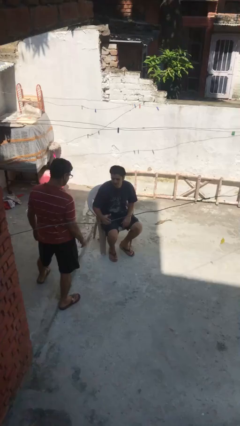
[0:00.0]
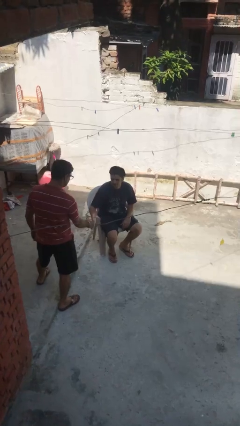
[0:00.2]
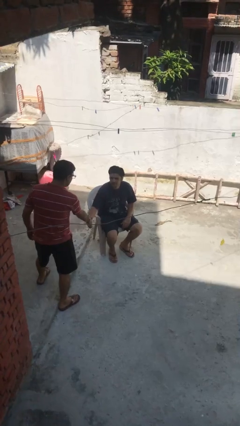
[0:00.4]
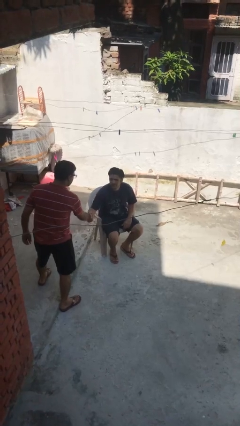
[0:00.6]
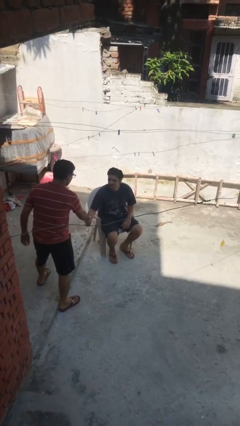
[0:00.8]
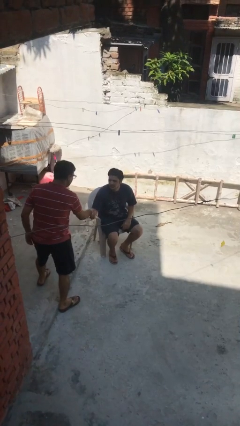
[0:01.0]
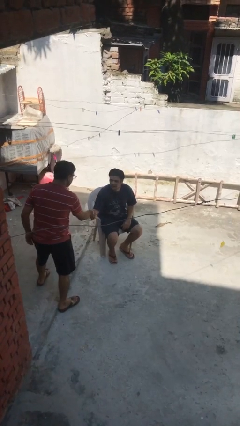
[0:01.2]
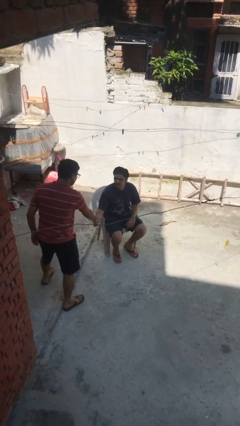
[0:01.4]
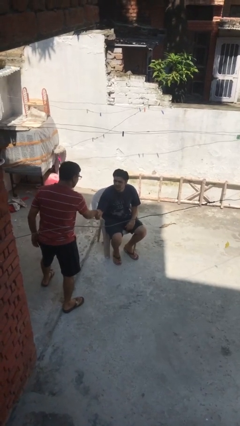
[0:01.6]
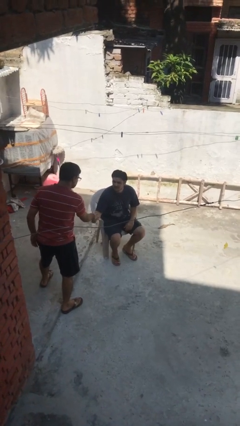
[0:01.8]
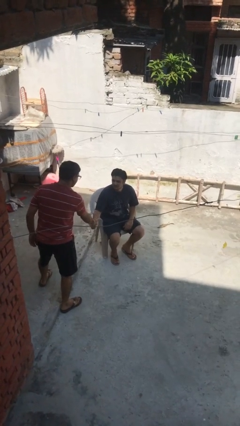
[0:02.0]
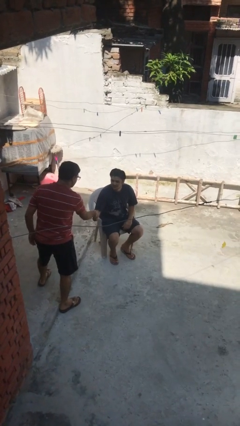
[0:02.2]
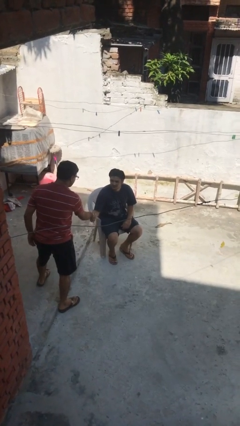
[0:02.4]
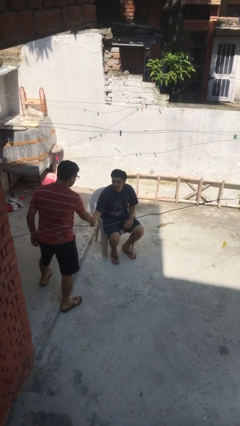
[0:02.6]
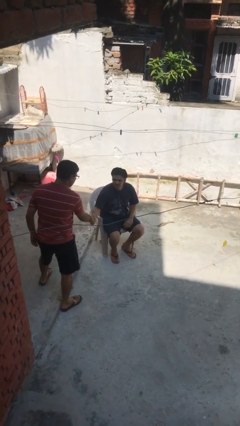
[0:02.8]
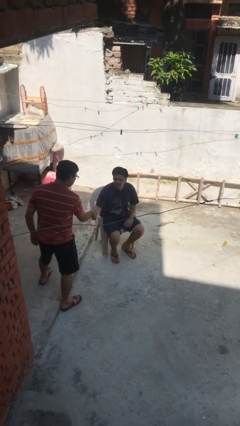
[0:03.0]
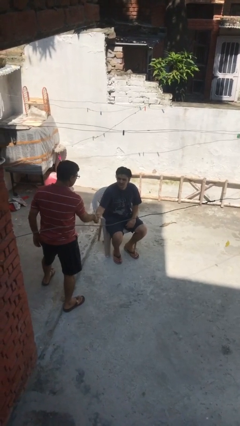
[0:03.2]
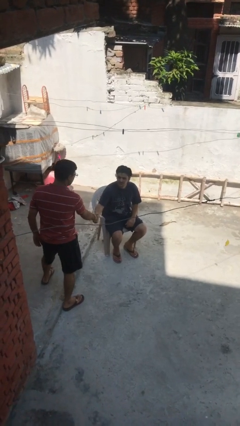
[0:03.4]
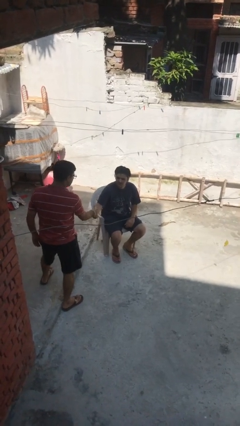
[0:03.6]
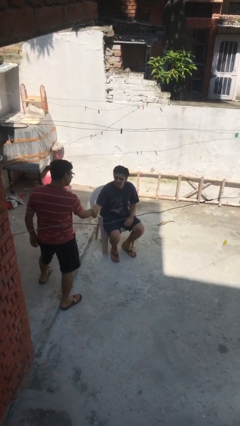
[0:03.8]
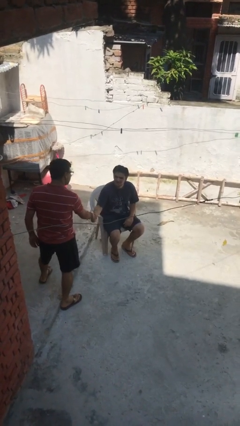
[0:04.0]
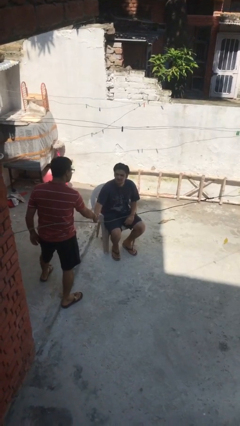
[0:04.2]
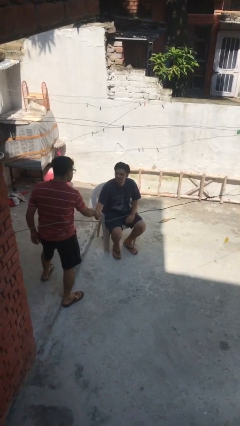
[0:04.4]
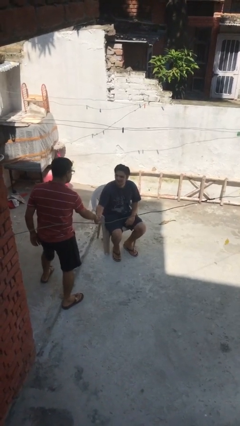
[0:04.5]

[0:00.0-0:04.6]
person shakes hand

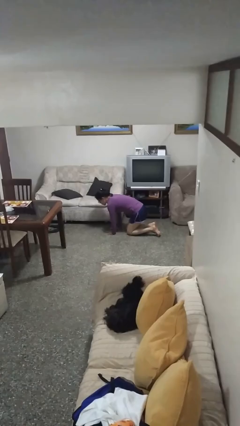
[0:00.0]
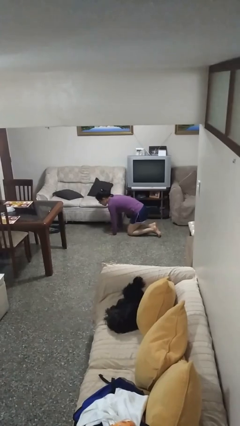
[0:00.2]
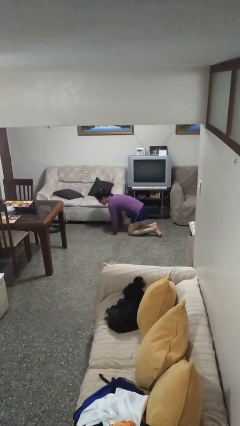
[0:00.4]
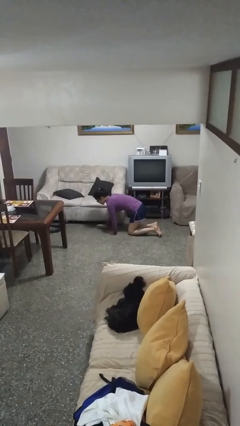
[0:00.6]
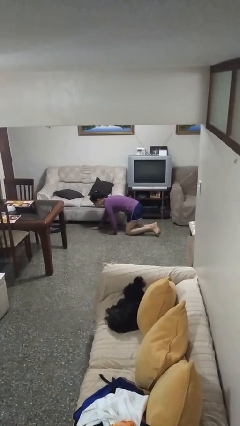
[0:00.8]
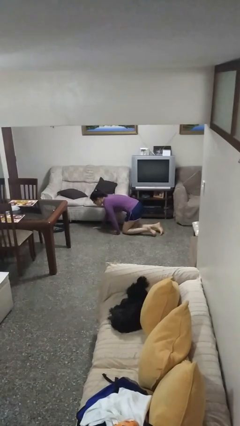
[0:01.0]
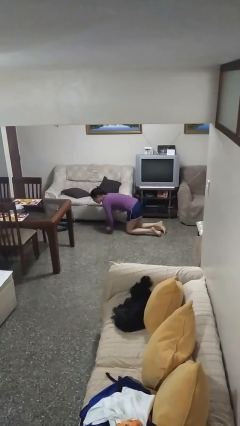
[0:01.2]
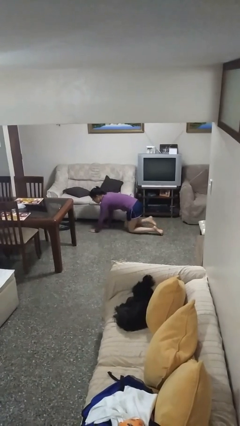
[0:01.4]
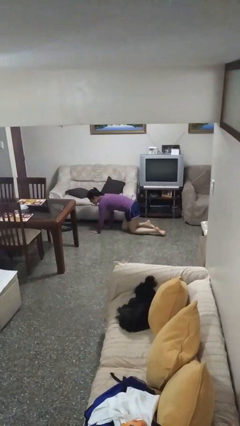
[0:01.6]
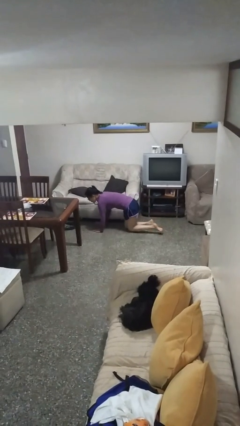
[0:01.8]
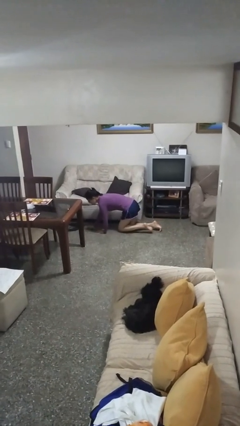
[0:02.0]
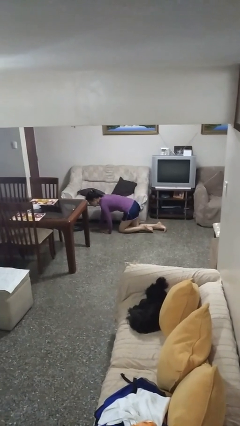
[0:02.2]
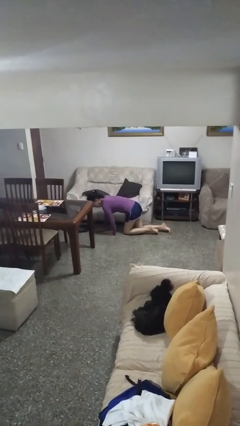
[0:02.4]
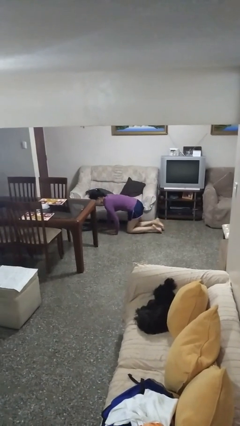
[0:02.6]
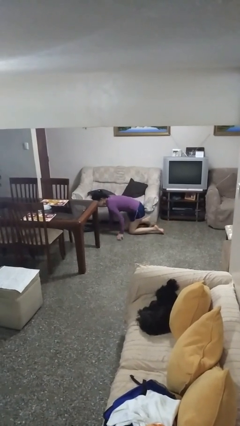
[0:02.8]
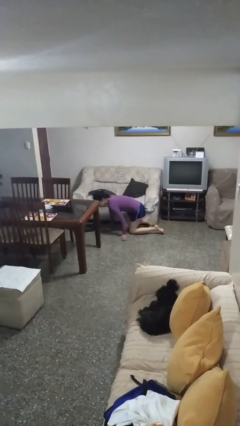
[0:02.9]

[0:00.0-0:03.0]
person crawls

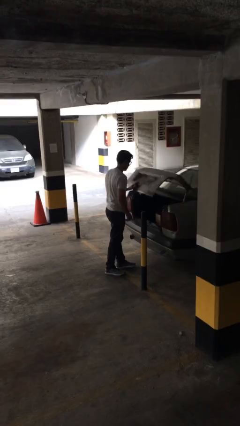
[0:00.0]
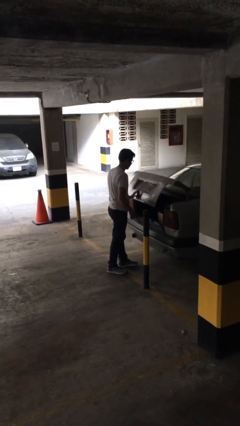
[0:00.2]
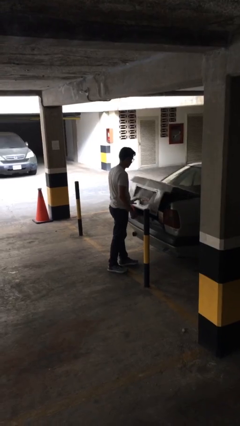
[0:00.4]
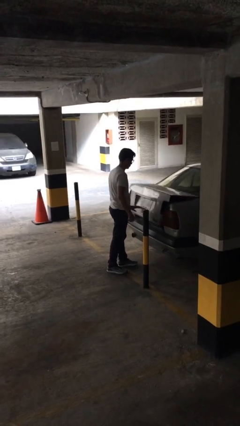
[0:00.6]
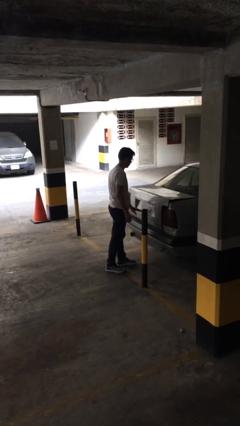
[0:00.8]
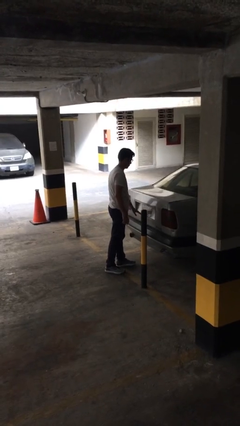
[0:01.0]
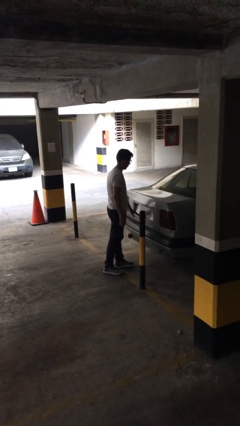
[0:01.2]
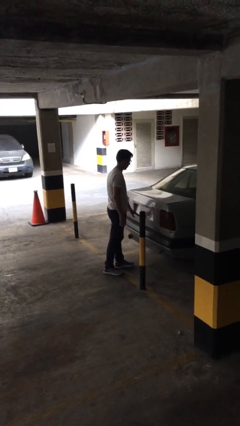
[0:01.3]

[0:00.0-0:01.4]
person closes car trunk

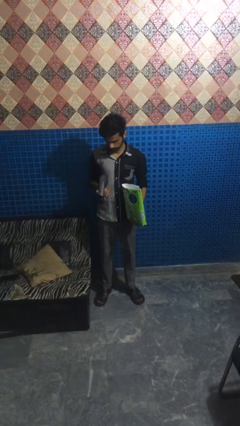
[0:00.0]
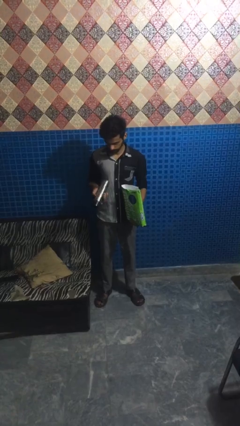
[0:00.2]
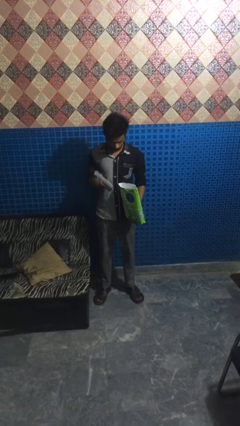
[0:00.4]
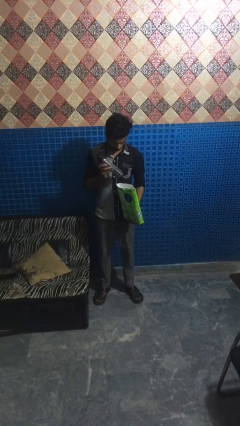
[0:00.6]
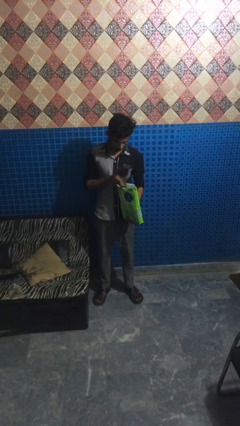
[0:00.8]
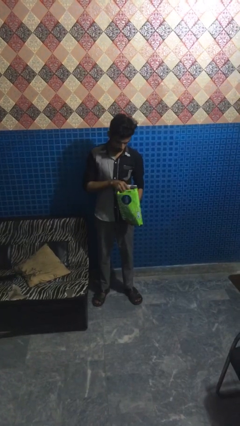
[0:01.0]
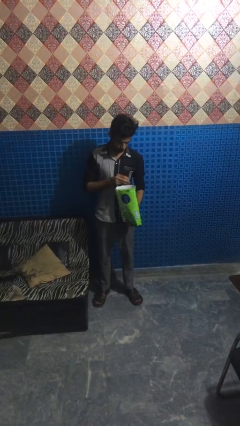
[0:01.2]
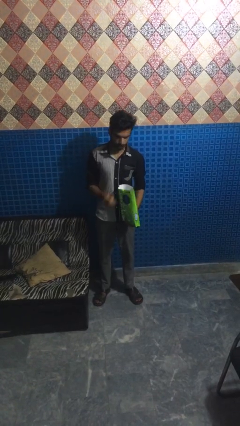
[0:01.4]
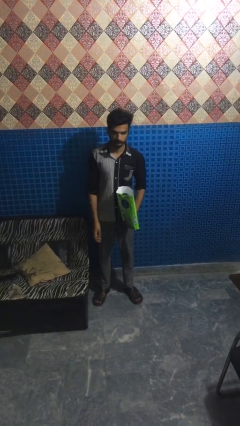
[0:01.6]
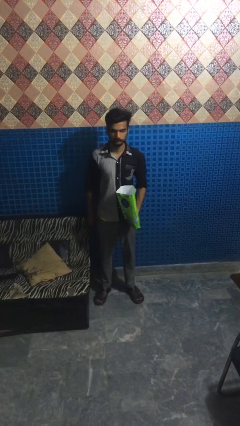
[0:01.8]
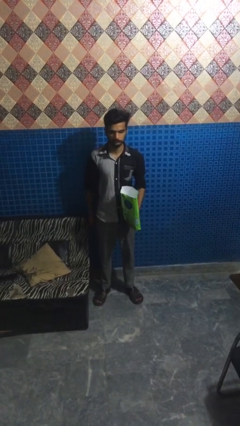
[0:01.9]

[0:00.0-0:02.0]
person puts object into bag

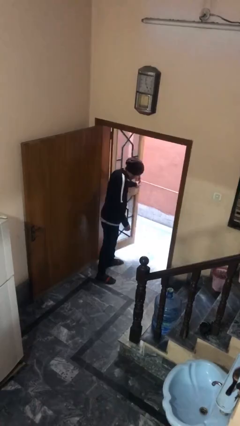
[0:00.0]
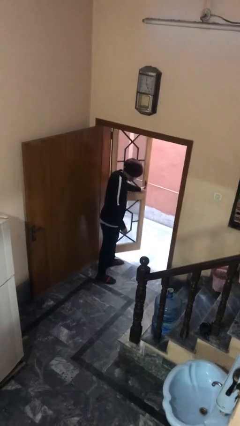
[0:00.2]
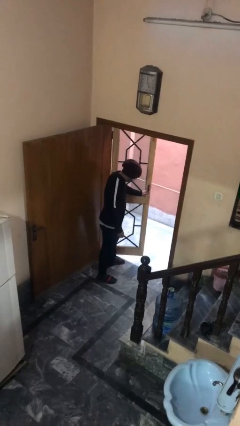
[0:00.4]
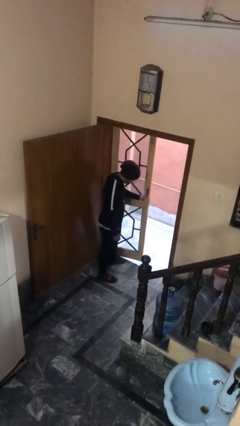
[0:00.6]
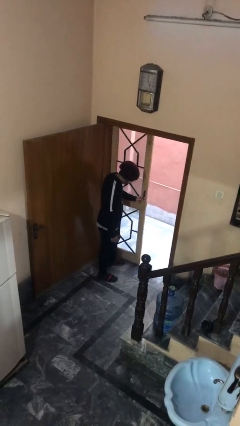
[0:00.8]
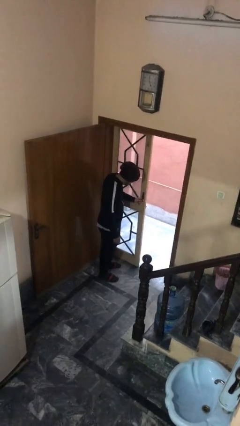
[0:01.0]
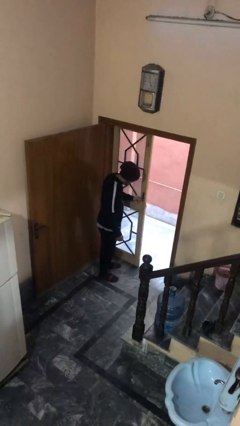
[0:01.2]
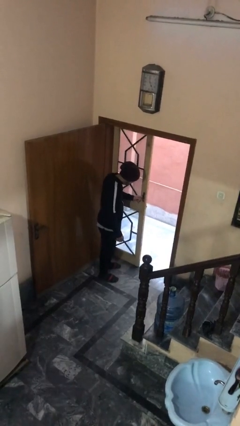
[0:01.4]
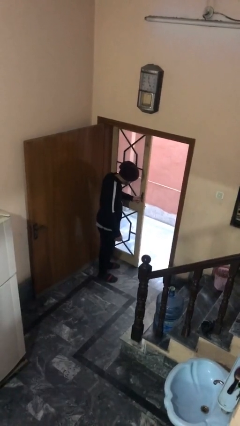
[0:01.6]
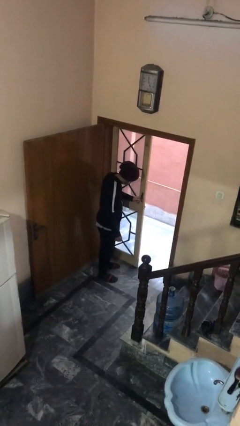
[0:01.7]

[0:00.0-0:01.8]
person closes facility door

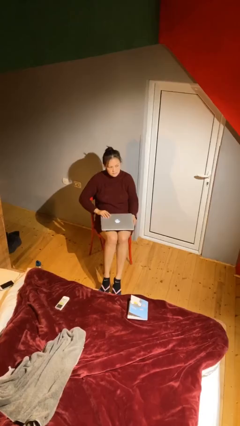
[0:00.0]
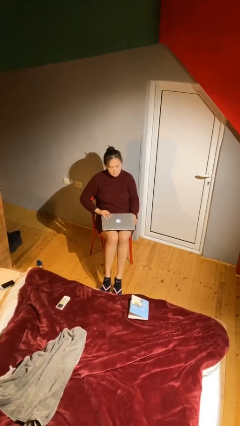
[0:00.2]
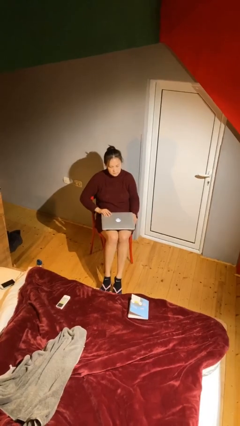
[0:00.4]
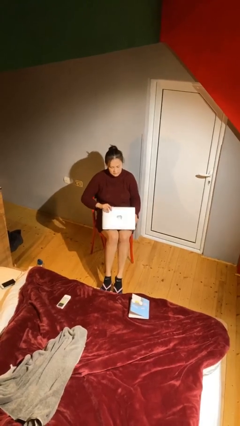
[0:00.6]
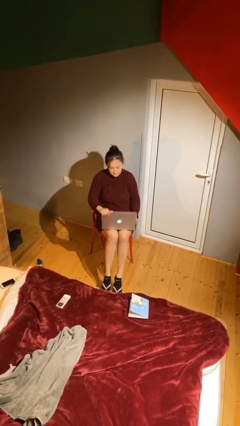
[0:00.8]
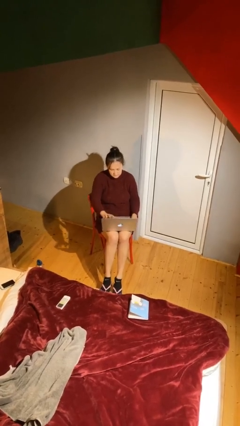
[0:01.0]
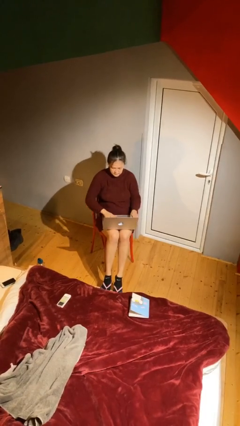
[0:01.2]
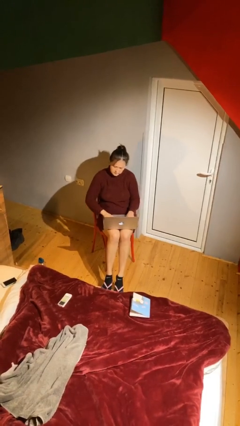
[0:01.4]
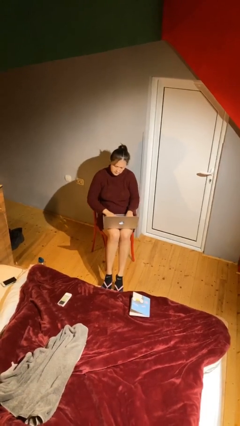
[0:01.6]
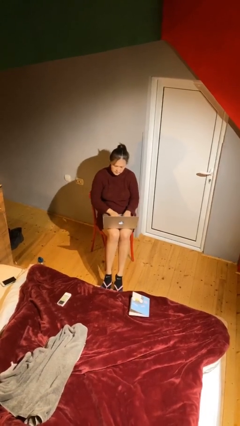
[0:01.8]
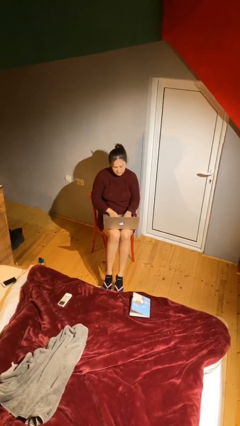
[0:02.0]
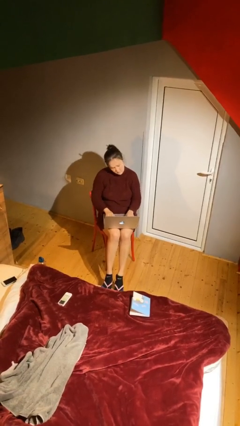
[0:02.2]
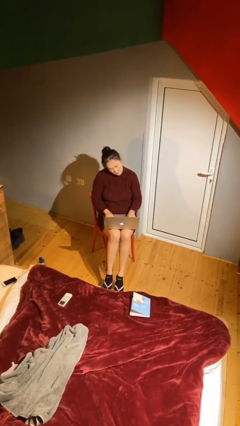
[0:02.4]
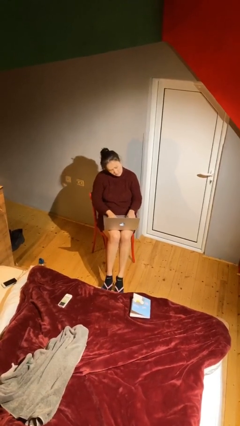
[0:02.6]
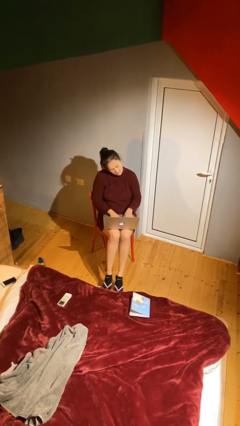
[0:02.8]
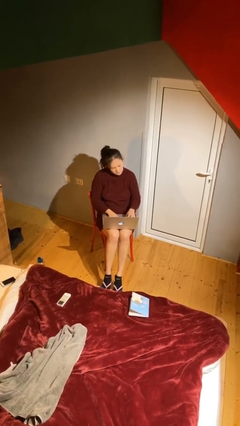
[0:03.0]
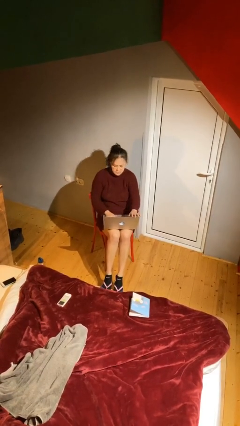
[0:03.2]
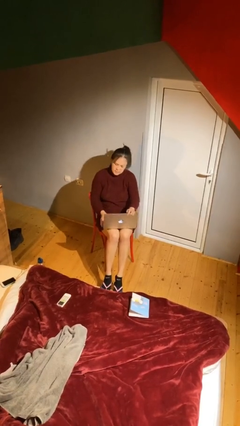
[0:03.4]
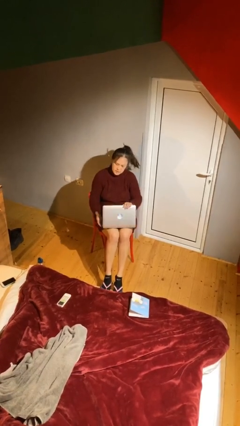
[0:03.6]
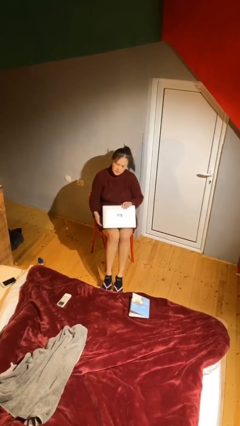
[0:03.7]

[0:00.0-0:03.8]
person interacts with laptop

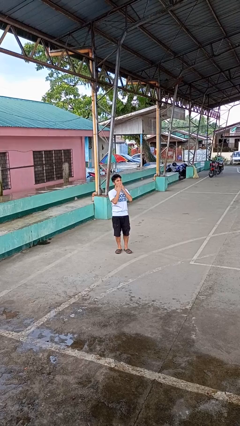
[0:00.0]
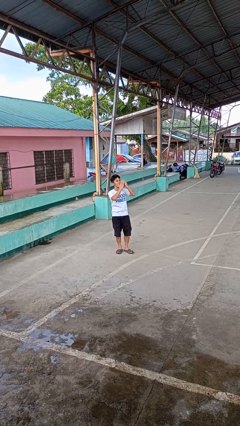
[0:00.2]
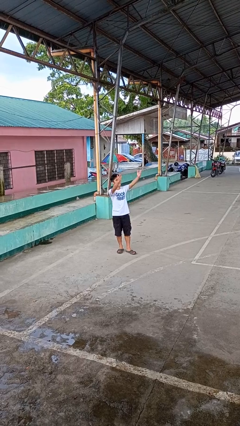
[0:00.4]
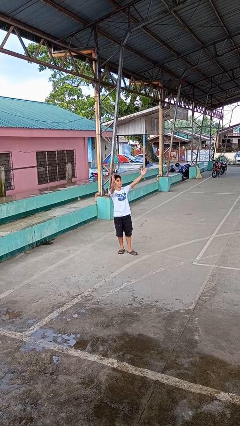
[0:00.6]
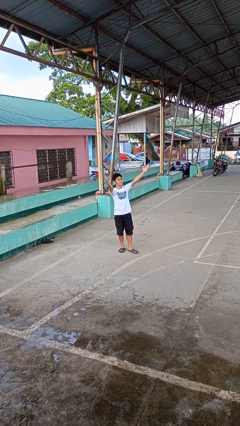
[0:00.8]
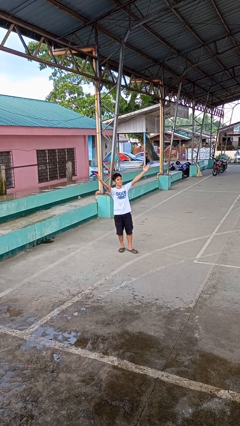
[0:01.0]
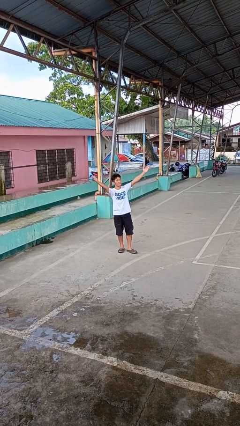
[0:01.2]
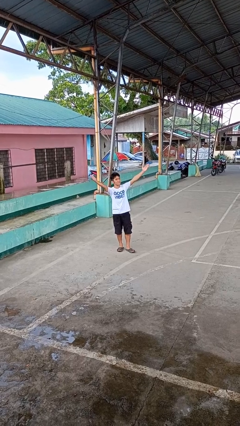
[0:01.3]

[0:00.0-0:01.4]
person gestures blow kiss
